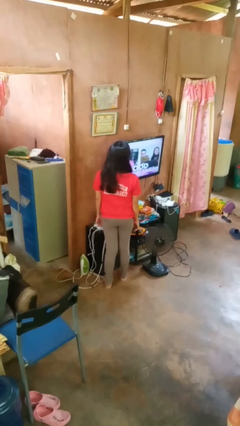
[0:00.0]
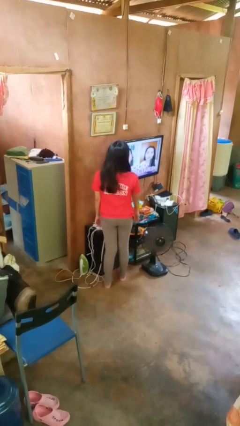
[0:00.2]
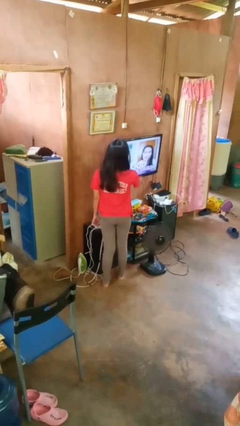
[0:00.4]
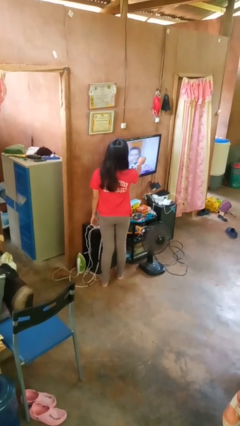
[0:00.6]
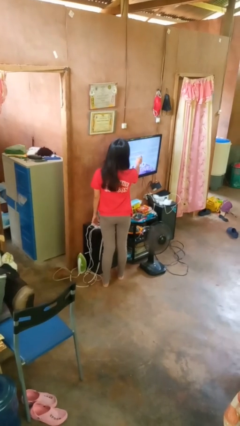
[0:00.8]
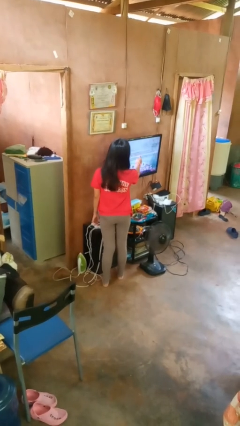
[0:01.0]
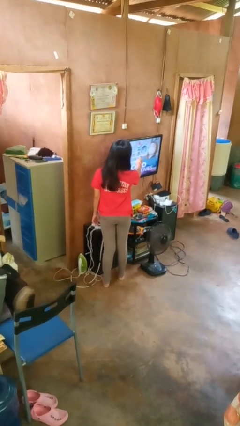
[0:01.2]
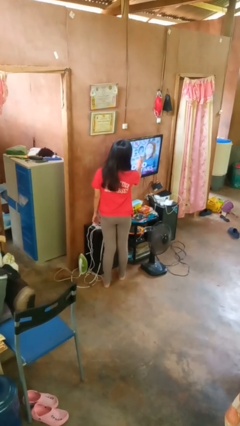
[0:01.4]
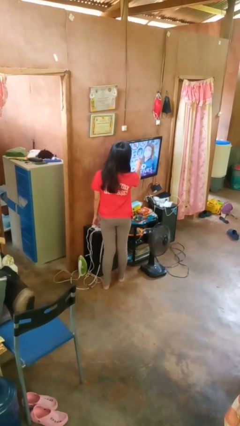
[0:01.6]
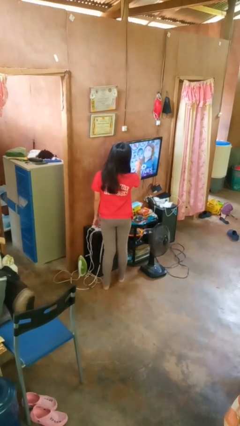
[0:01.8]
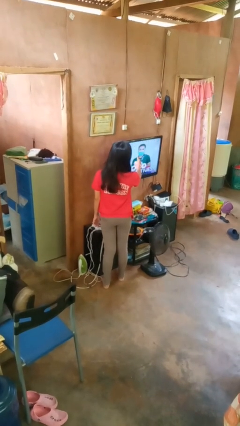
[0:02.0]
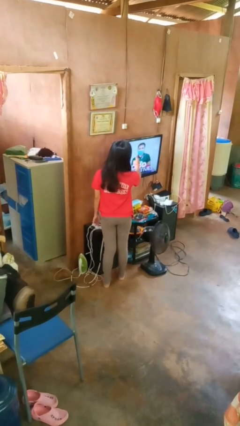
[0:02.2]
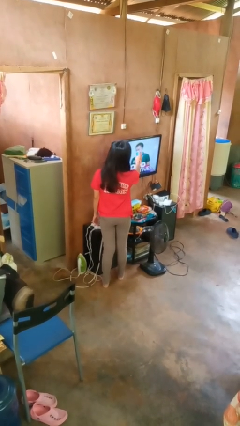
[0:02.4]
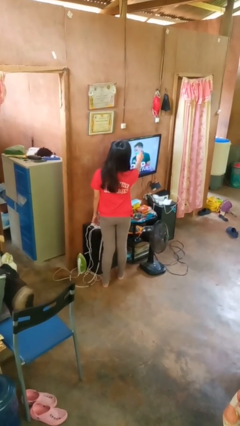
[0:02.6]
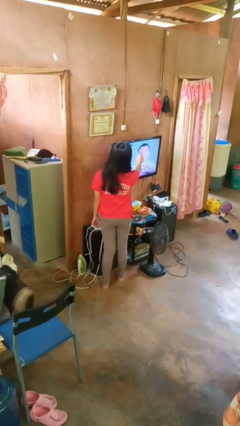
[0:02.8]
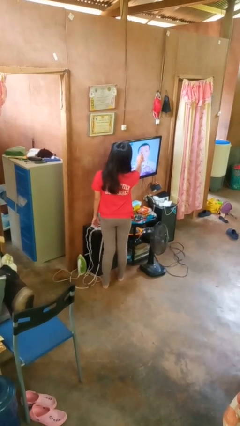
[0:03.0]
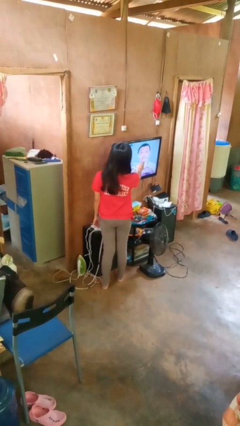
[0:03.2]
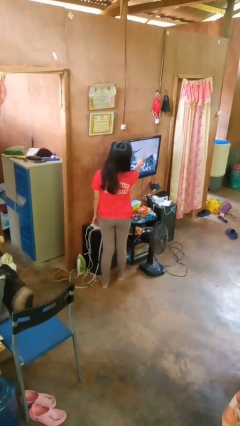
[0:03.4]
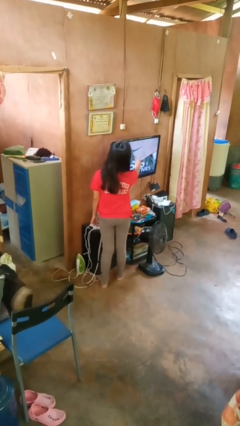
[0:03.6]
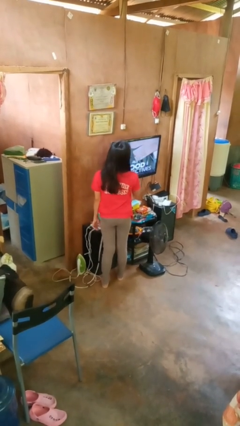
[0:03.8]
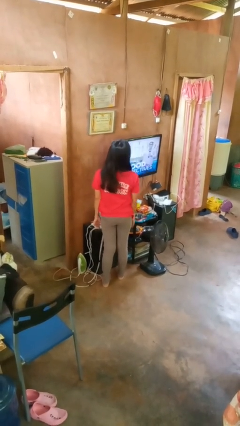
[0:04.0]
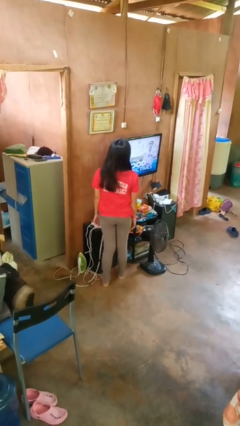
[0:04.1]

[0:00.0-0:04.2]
person taps object with finger

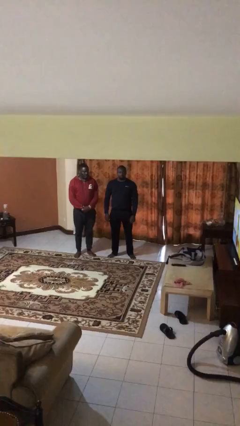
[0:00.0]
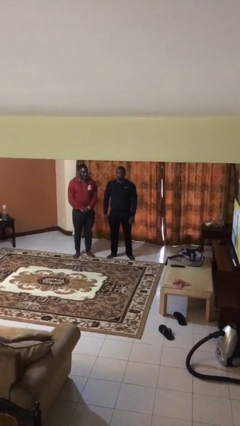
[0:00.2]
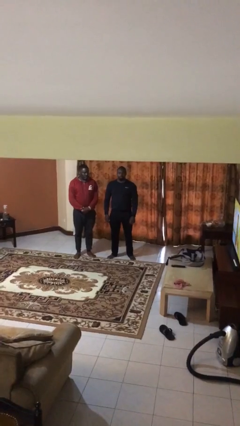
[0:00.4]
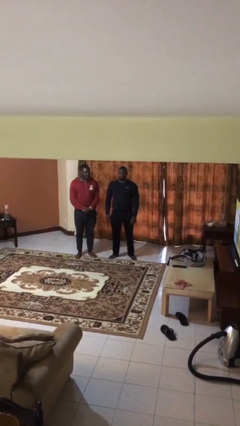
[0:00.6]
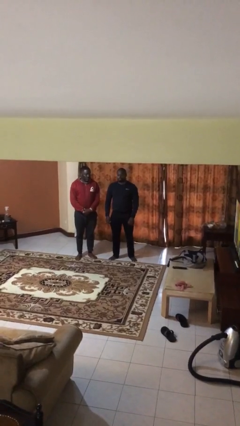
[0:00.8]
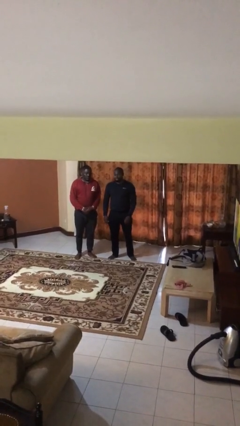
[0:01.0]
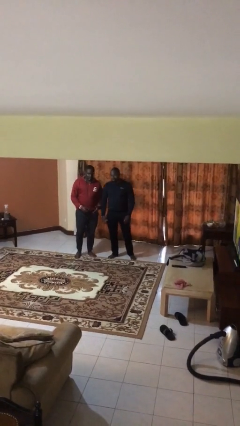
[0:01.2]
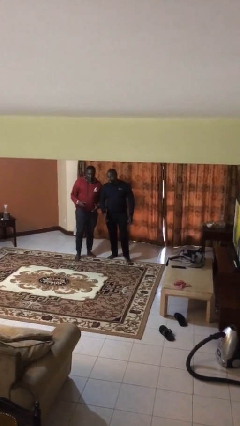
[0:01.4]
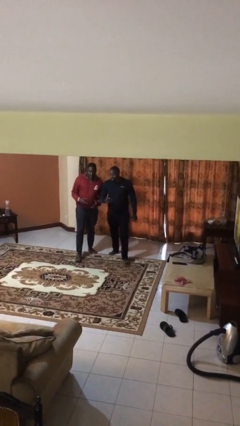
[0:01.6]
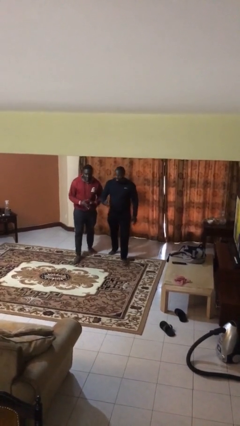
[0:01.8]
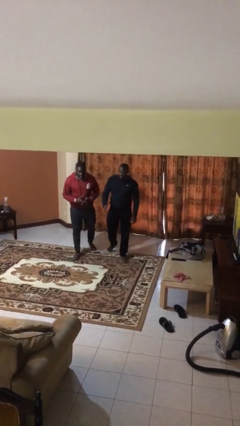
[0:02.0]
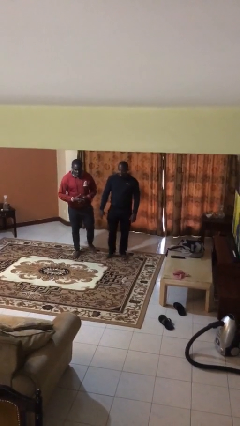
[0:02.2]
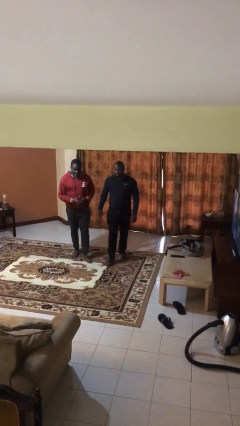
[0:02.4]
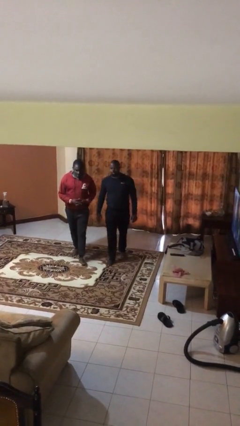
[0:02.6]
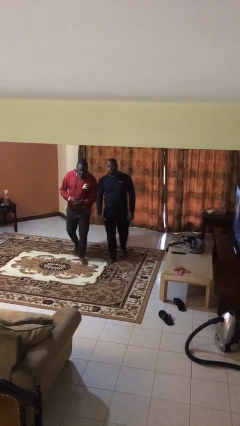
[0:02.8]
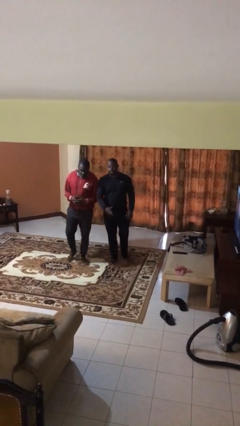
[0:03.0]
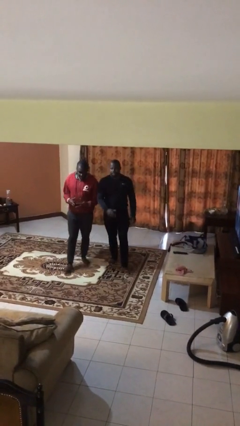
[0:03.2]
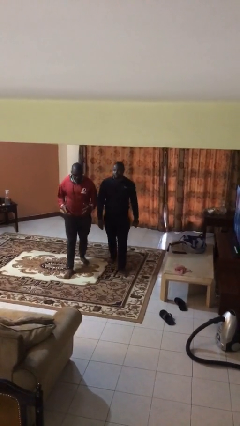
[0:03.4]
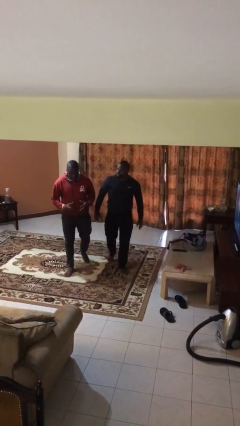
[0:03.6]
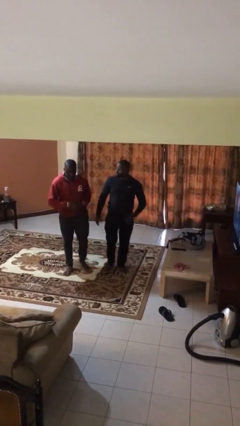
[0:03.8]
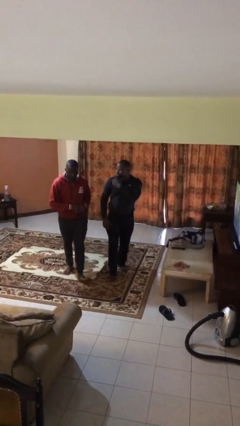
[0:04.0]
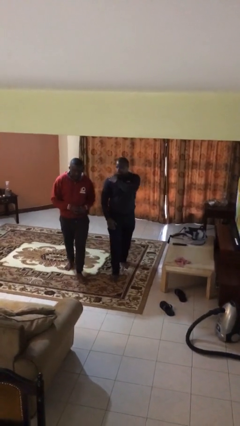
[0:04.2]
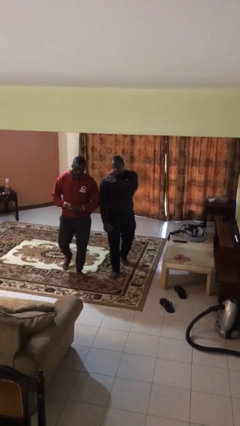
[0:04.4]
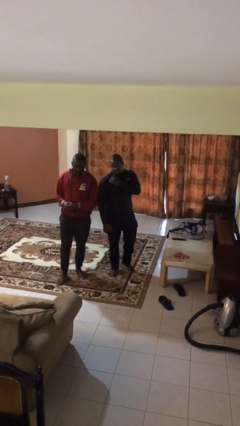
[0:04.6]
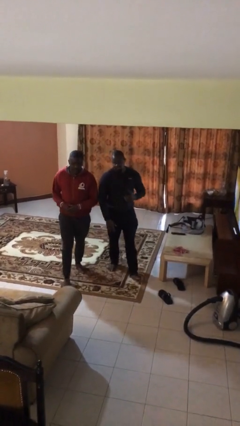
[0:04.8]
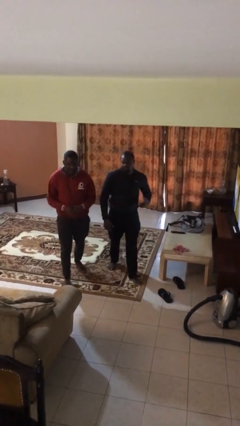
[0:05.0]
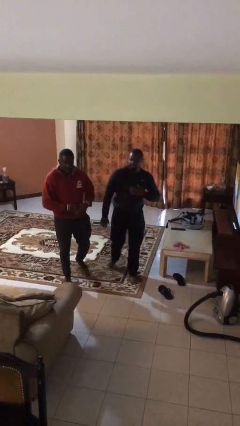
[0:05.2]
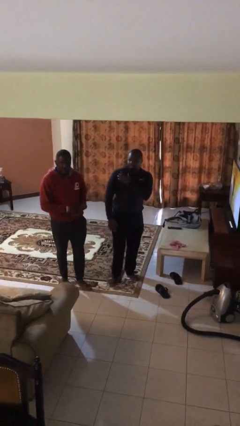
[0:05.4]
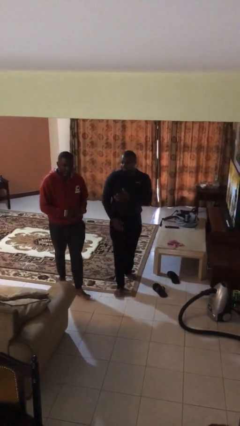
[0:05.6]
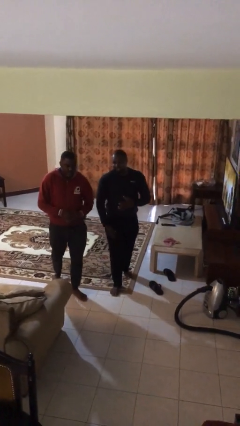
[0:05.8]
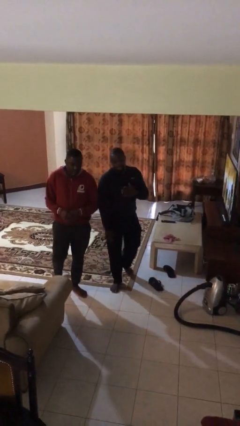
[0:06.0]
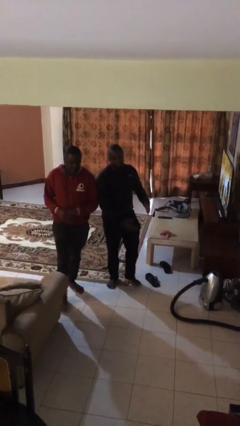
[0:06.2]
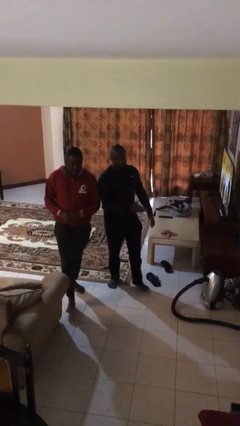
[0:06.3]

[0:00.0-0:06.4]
person talks to person

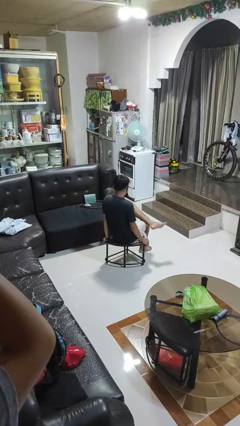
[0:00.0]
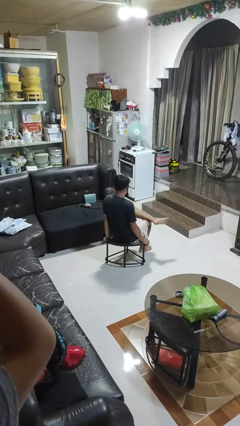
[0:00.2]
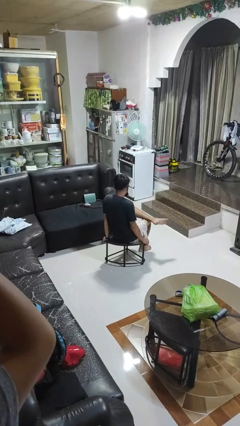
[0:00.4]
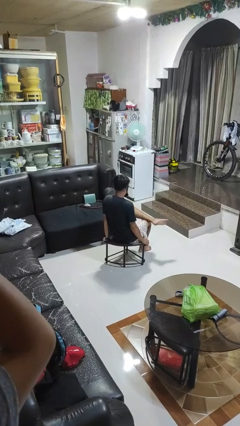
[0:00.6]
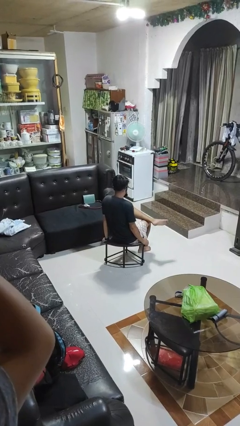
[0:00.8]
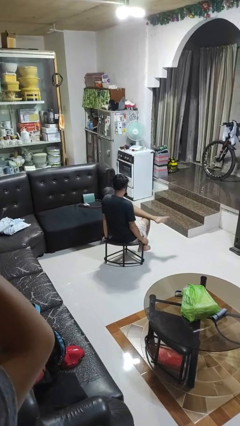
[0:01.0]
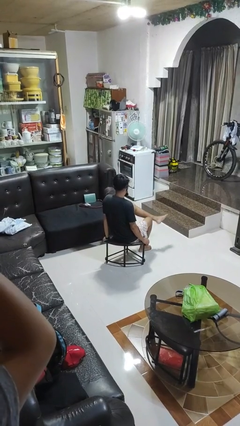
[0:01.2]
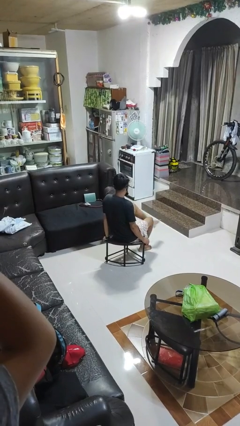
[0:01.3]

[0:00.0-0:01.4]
person crosses legs

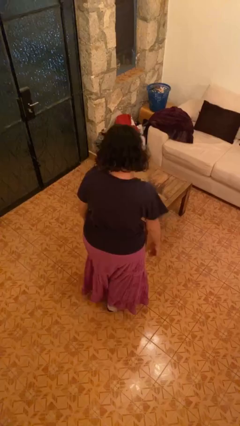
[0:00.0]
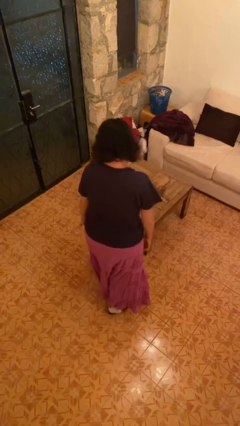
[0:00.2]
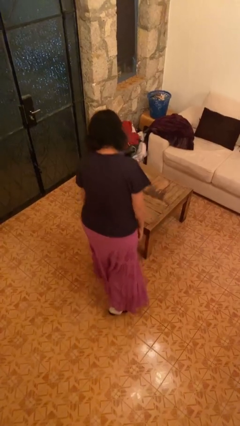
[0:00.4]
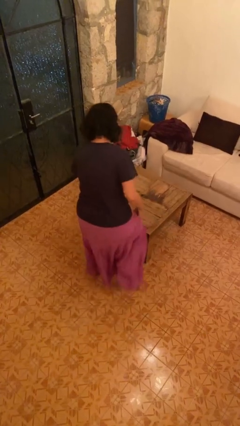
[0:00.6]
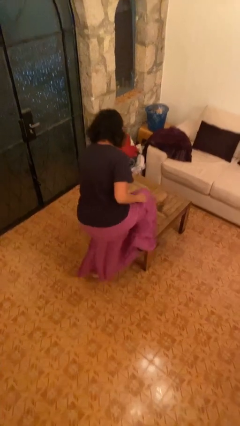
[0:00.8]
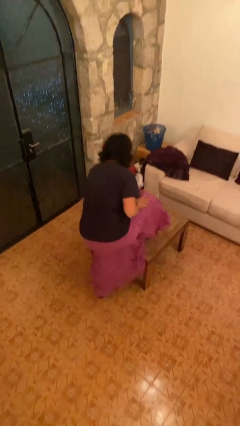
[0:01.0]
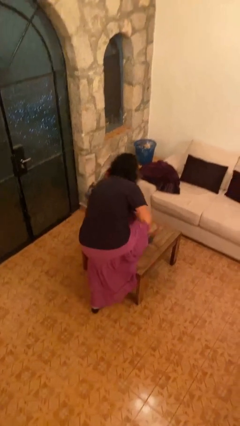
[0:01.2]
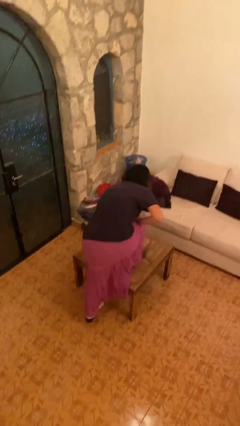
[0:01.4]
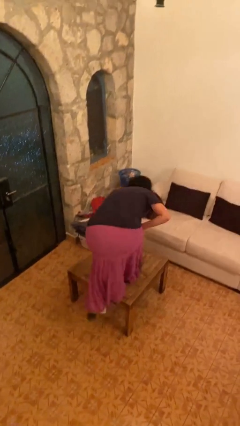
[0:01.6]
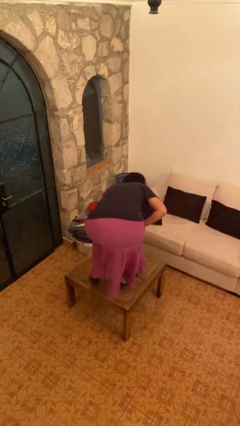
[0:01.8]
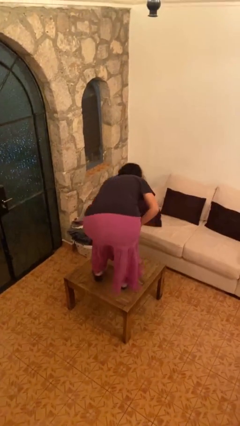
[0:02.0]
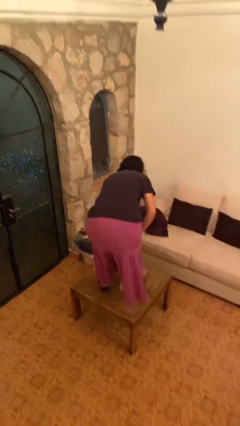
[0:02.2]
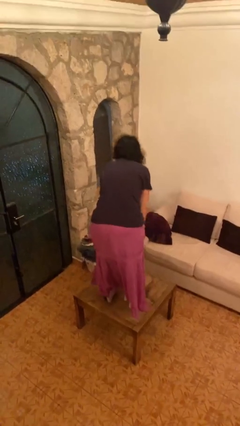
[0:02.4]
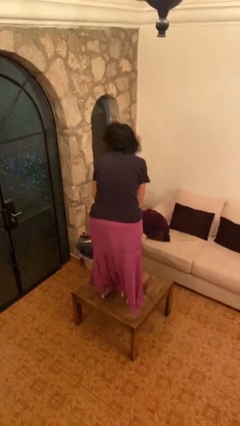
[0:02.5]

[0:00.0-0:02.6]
person climbs on table

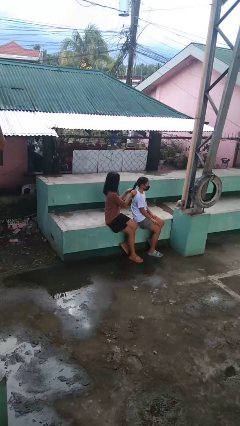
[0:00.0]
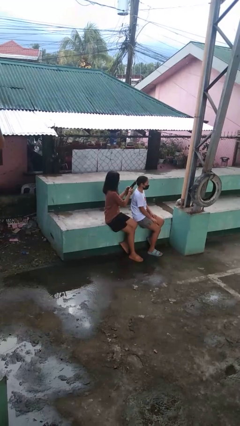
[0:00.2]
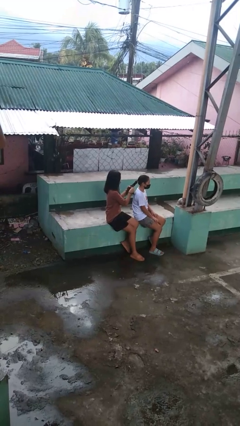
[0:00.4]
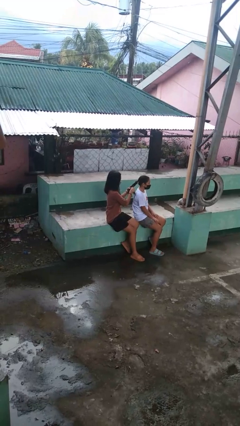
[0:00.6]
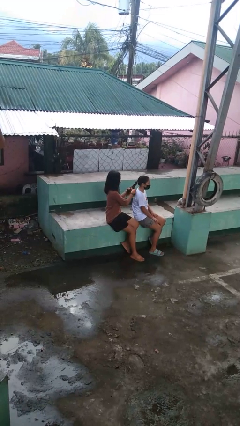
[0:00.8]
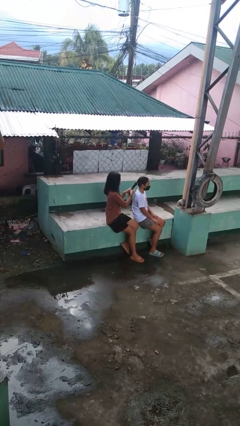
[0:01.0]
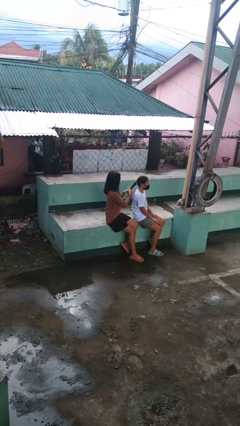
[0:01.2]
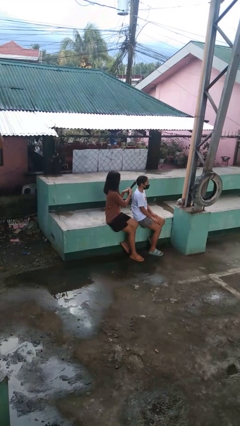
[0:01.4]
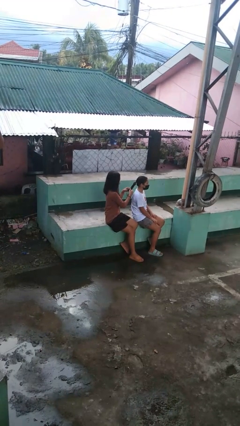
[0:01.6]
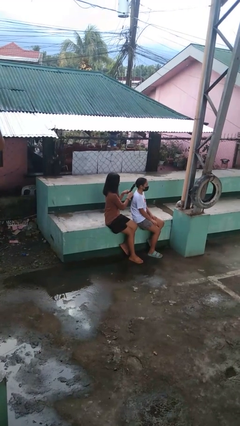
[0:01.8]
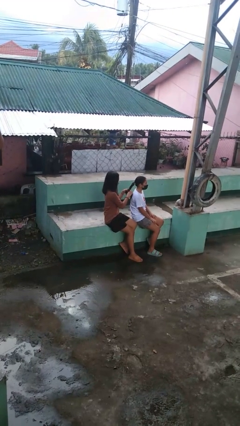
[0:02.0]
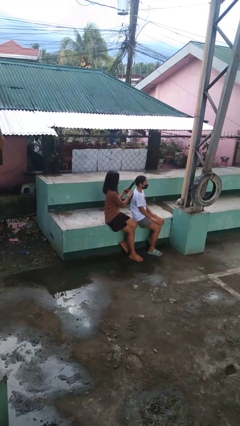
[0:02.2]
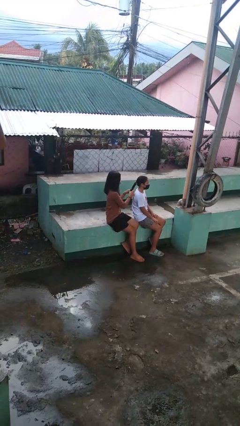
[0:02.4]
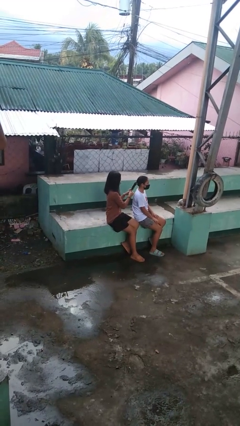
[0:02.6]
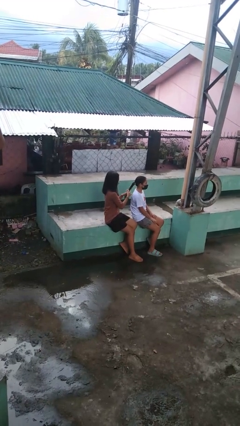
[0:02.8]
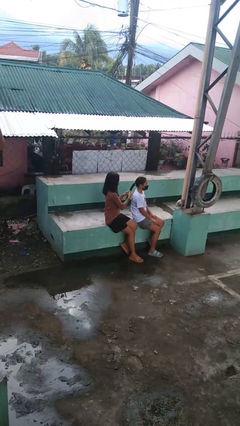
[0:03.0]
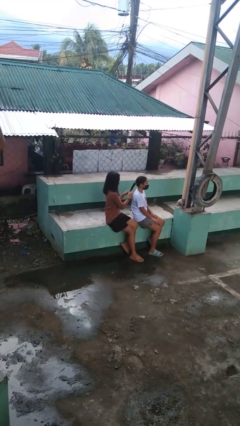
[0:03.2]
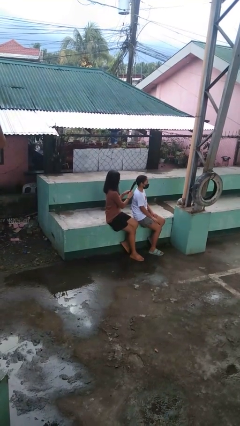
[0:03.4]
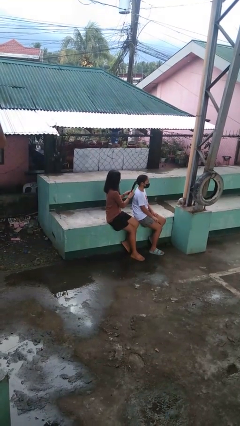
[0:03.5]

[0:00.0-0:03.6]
person braids hair of person
